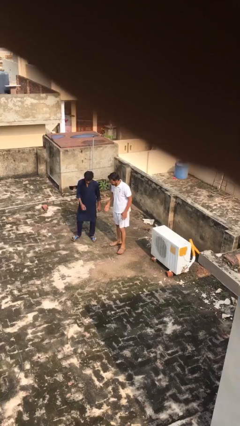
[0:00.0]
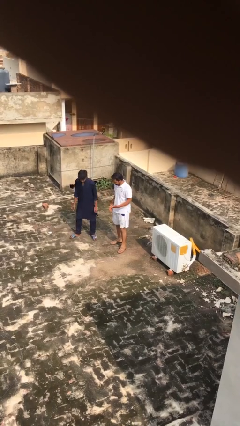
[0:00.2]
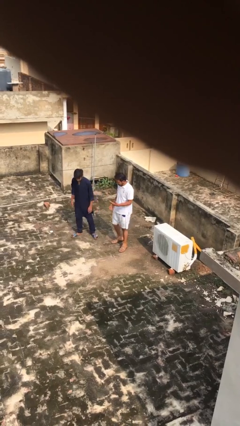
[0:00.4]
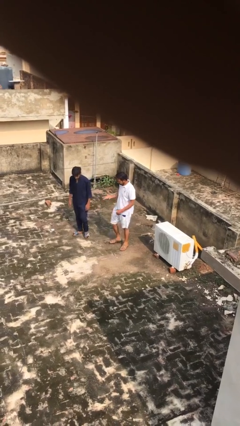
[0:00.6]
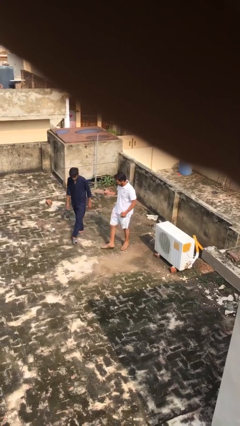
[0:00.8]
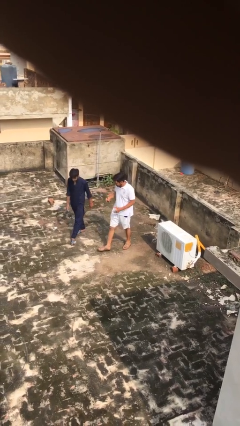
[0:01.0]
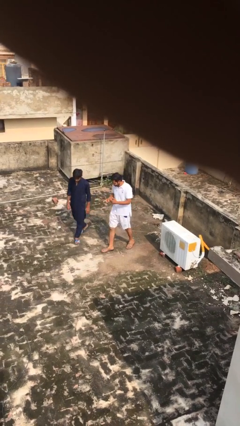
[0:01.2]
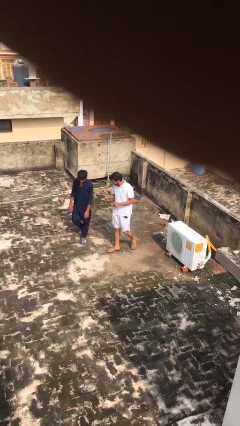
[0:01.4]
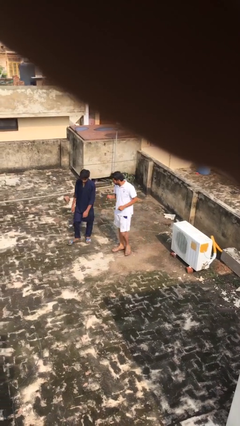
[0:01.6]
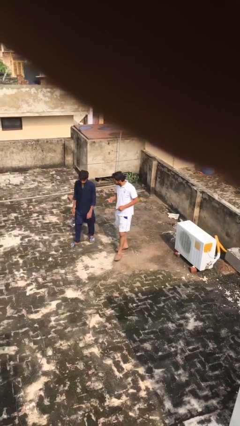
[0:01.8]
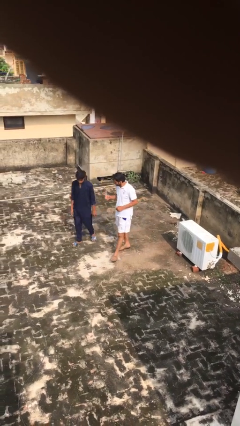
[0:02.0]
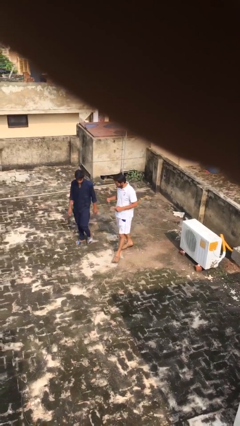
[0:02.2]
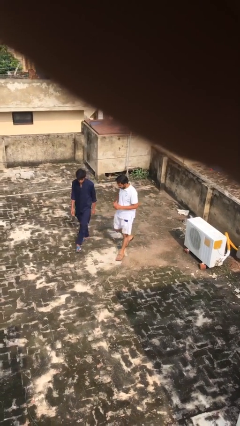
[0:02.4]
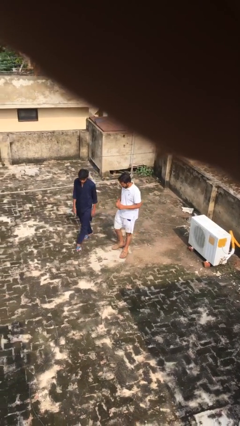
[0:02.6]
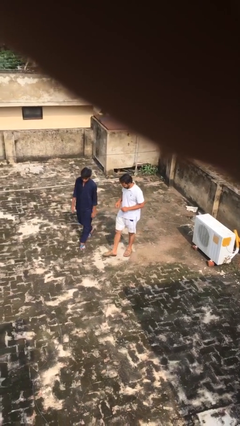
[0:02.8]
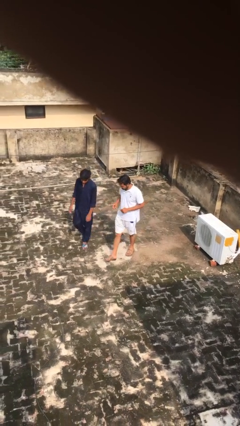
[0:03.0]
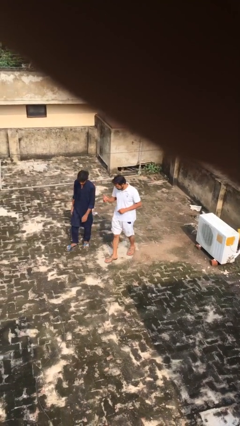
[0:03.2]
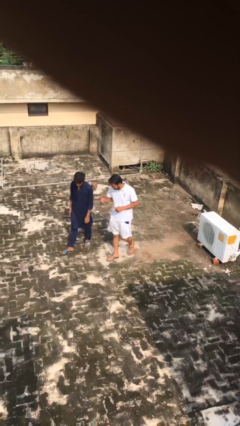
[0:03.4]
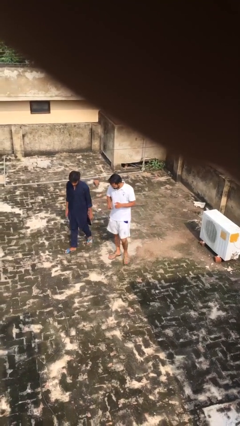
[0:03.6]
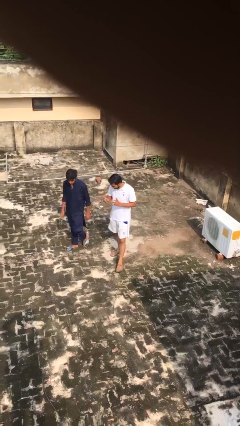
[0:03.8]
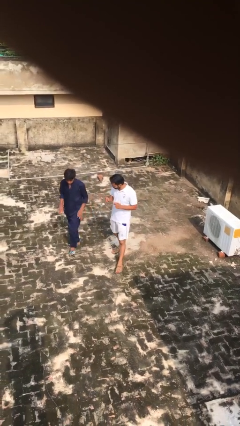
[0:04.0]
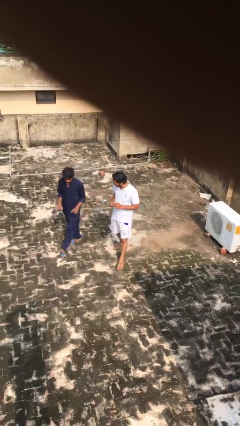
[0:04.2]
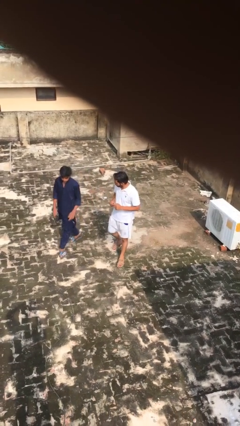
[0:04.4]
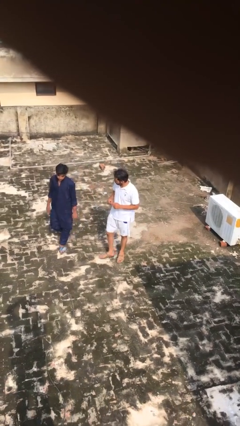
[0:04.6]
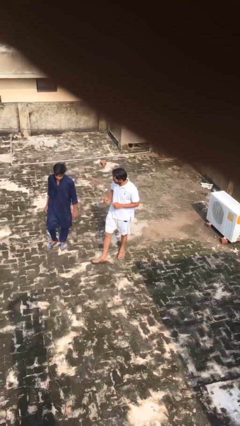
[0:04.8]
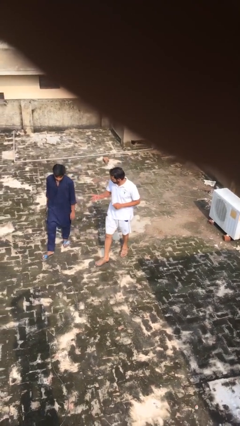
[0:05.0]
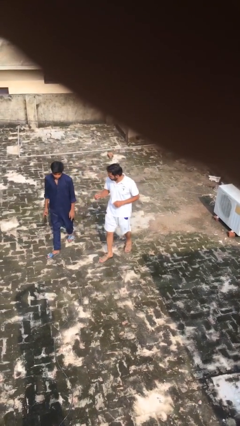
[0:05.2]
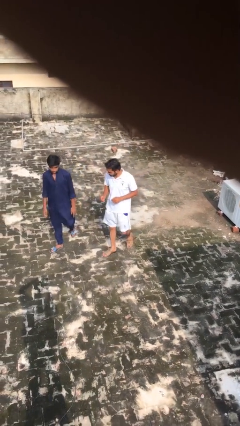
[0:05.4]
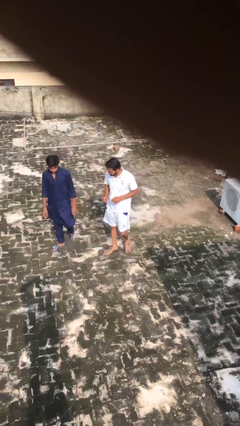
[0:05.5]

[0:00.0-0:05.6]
person talks to person

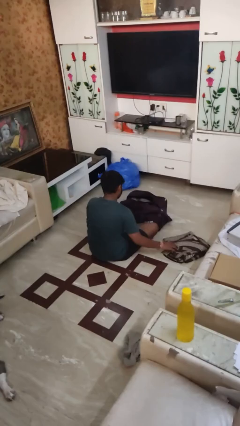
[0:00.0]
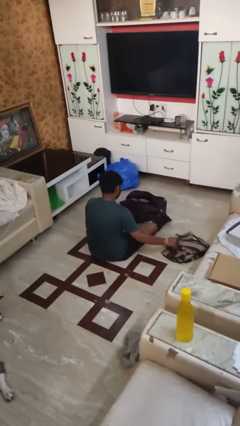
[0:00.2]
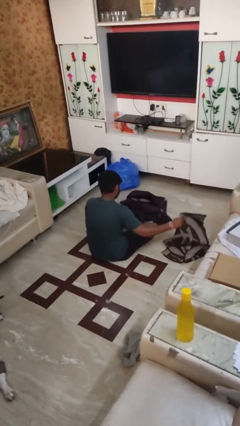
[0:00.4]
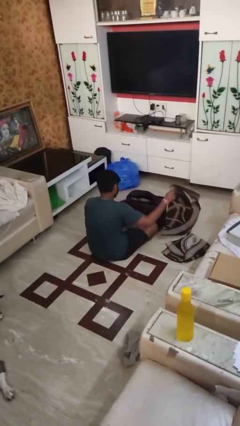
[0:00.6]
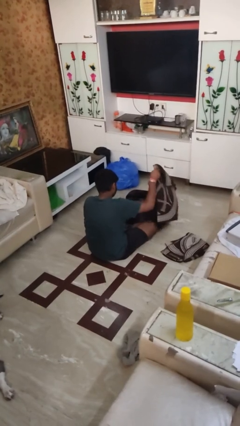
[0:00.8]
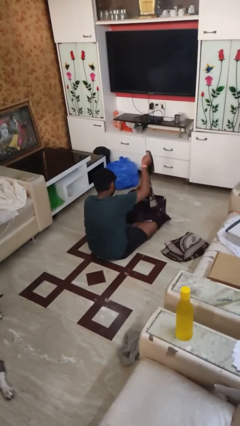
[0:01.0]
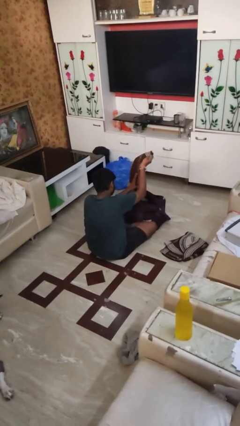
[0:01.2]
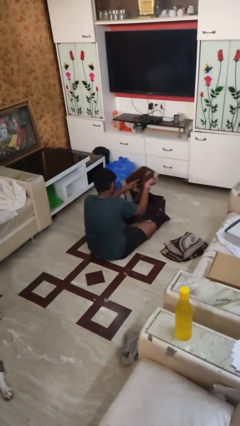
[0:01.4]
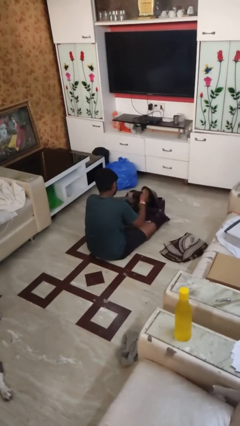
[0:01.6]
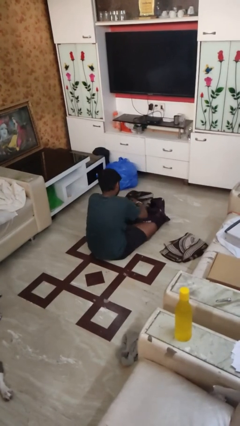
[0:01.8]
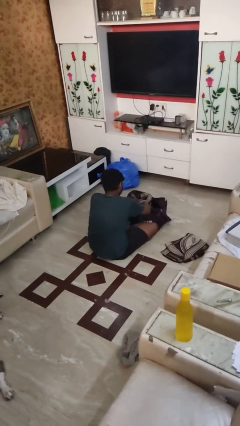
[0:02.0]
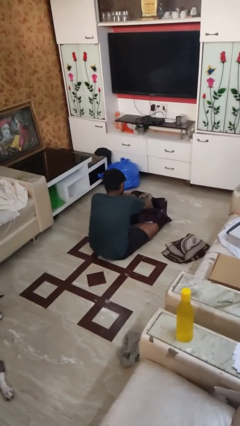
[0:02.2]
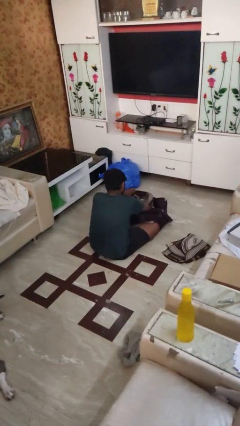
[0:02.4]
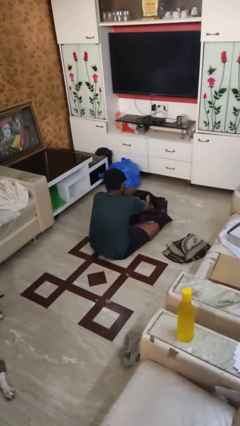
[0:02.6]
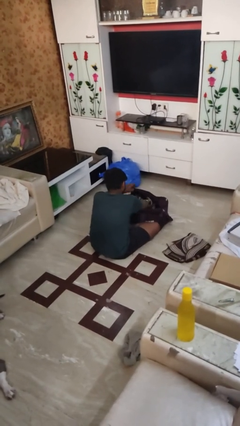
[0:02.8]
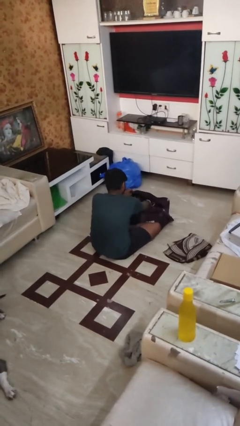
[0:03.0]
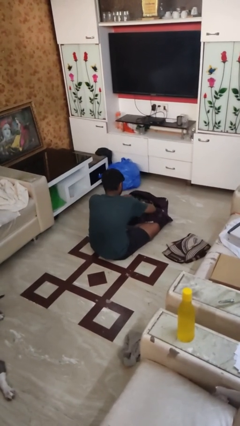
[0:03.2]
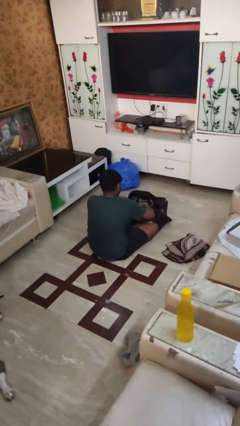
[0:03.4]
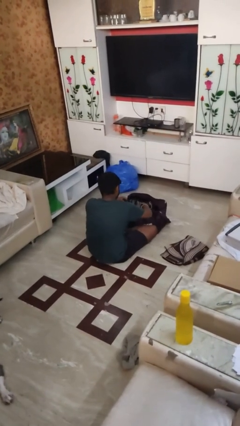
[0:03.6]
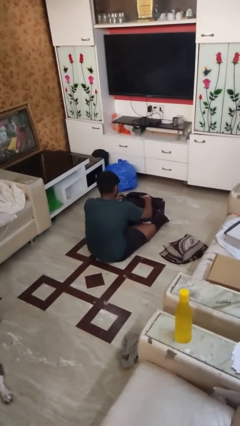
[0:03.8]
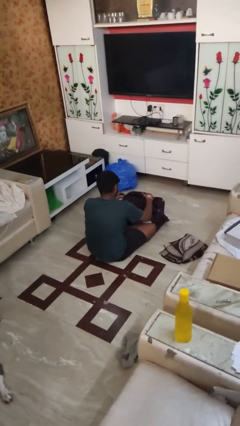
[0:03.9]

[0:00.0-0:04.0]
person loads clothes into suitcase

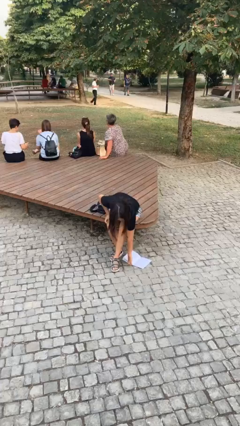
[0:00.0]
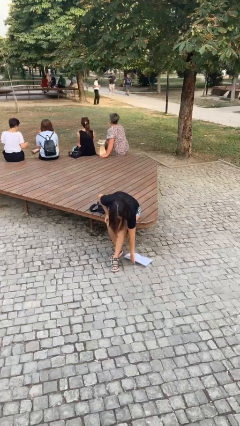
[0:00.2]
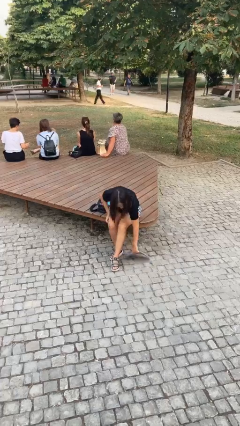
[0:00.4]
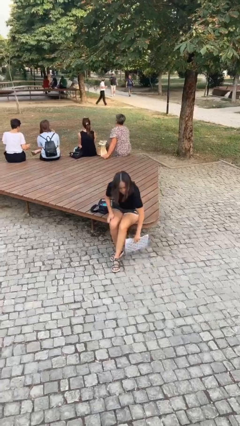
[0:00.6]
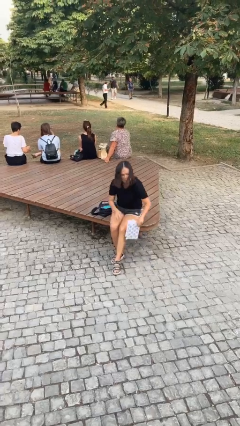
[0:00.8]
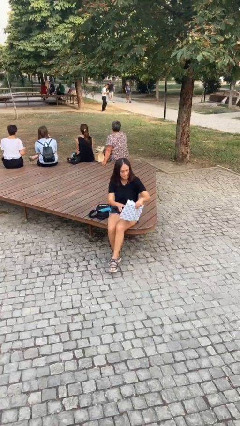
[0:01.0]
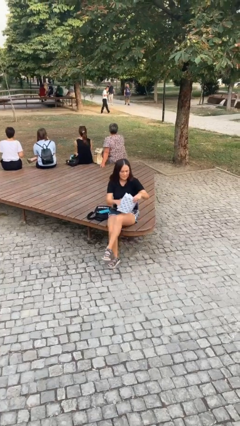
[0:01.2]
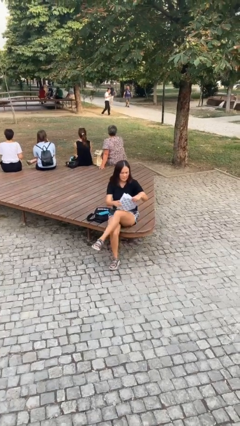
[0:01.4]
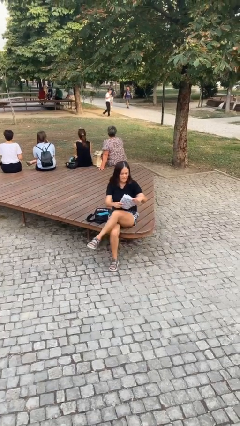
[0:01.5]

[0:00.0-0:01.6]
person picks up object from floor
